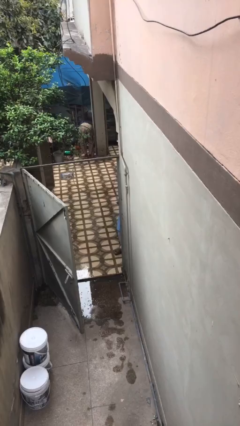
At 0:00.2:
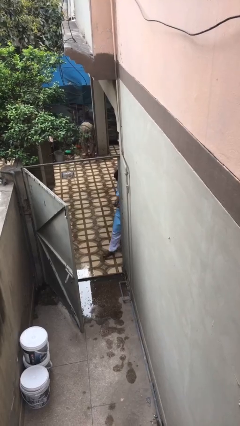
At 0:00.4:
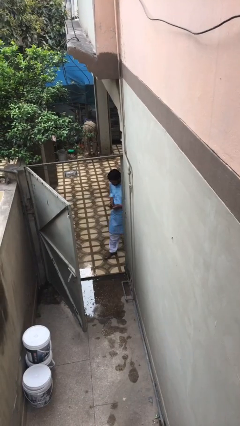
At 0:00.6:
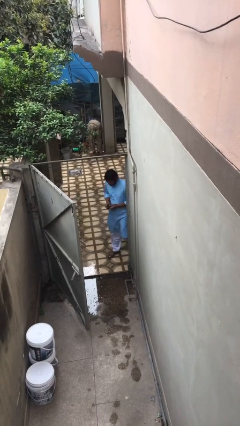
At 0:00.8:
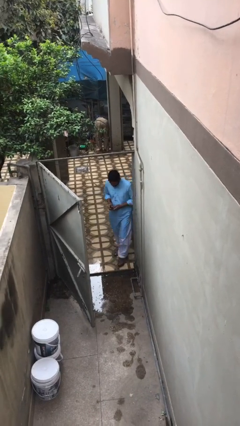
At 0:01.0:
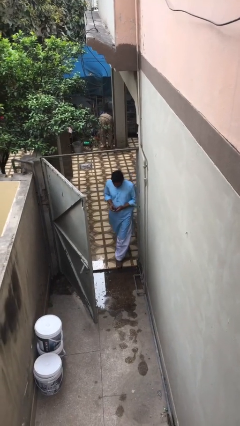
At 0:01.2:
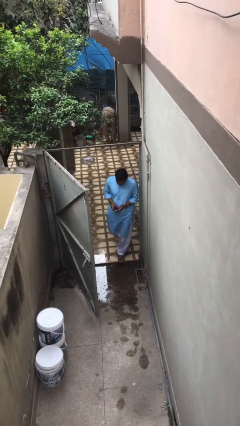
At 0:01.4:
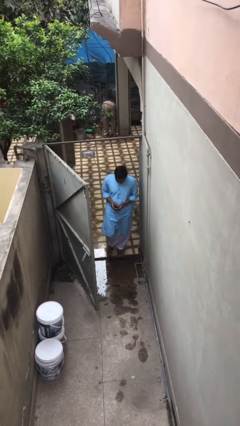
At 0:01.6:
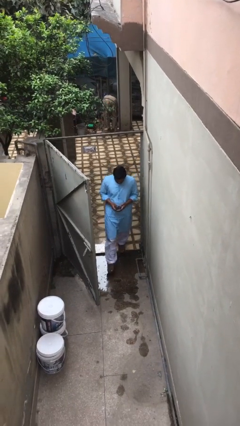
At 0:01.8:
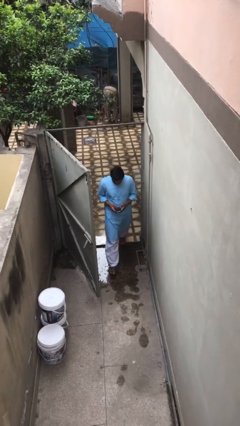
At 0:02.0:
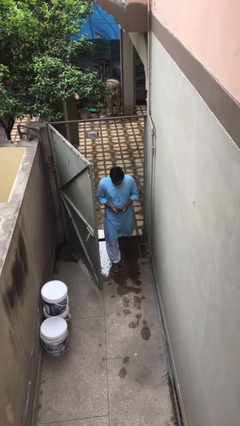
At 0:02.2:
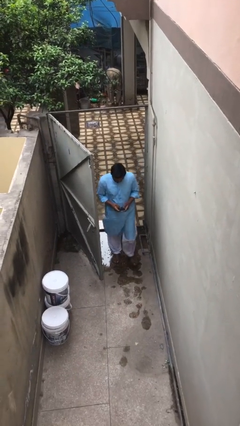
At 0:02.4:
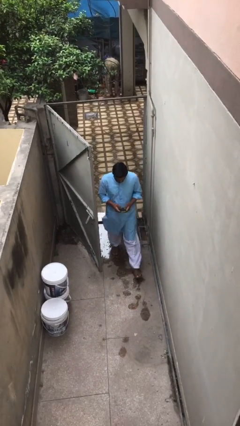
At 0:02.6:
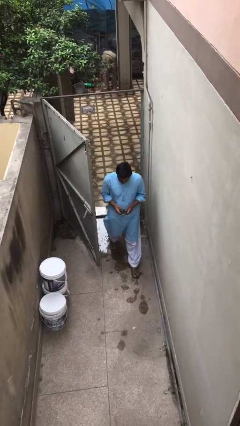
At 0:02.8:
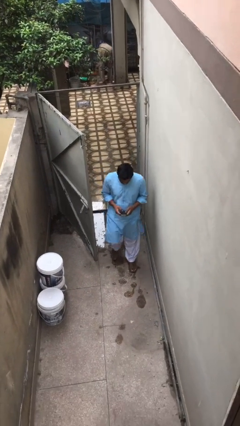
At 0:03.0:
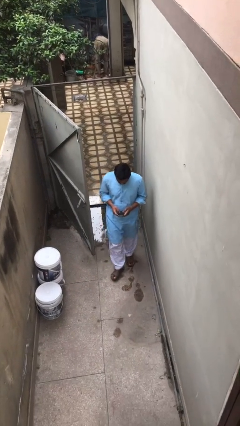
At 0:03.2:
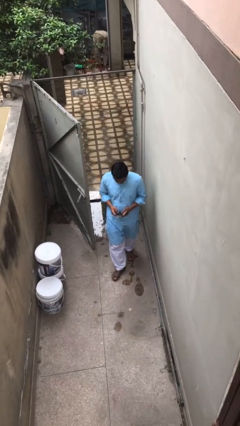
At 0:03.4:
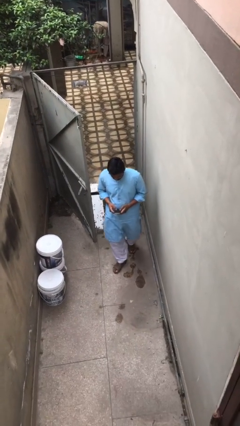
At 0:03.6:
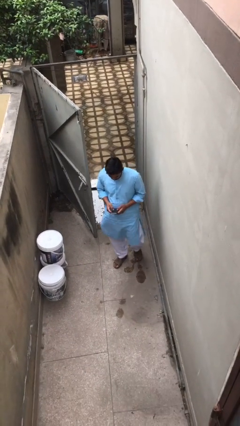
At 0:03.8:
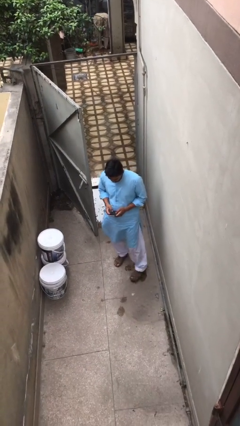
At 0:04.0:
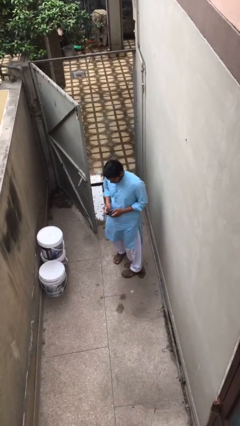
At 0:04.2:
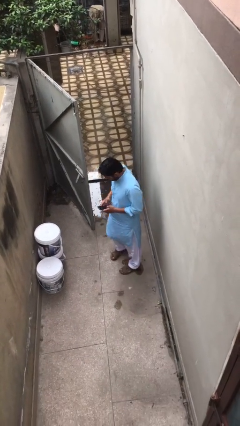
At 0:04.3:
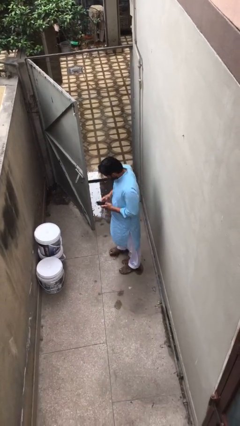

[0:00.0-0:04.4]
person enters scene through structure

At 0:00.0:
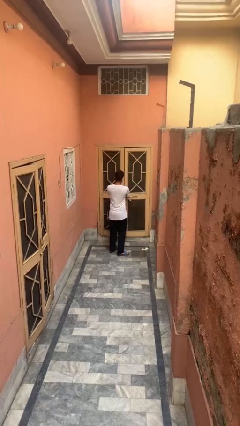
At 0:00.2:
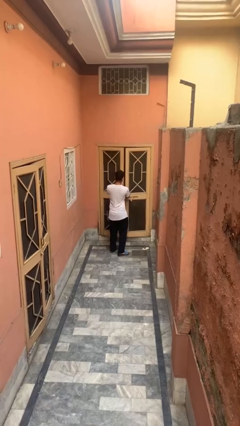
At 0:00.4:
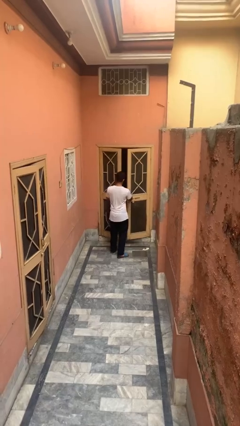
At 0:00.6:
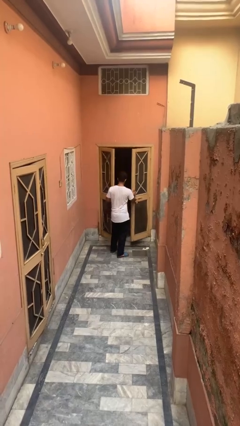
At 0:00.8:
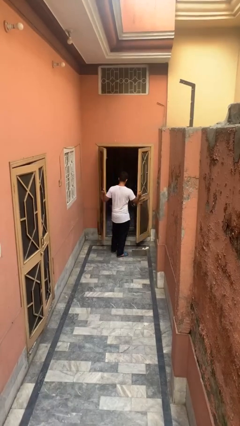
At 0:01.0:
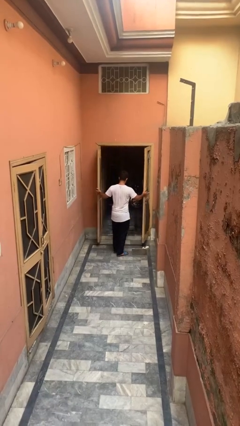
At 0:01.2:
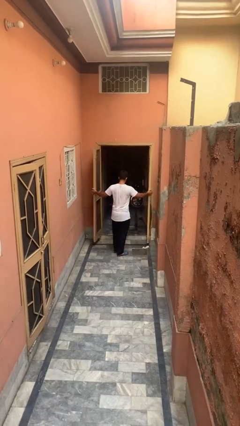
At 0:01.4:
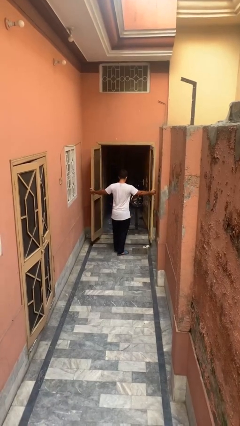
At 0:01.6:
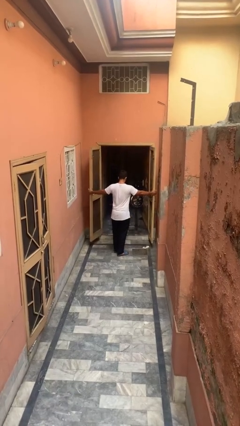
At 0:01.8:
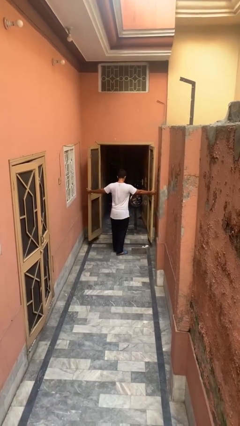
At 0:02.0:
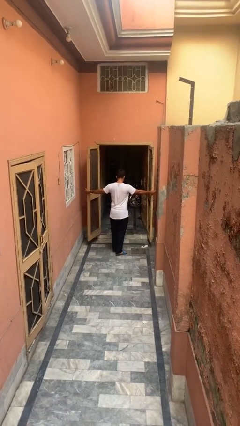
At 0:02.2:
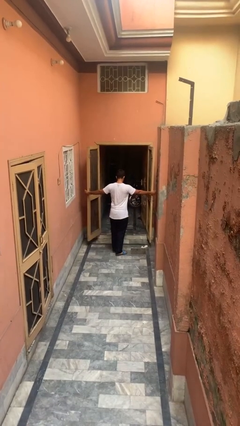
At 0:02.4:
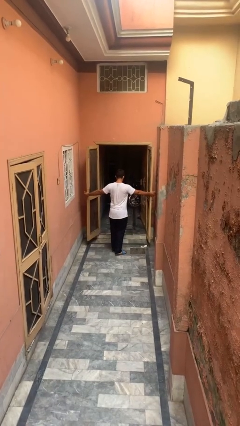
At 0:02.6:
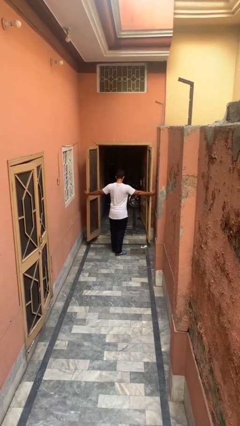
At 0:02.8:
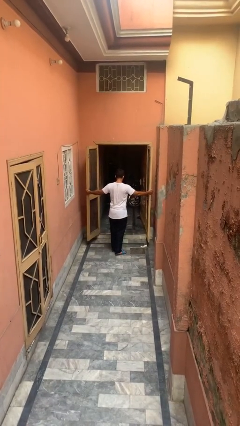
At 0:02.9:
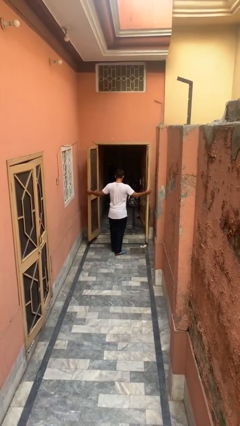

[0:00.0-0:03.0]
person opens gate

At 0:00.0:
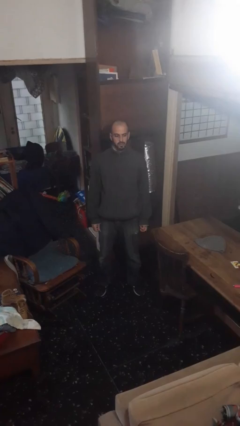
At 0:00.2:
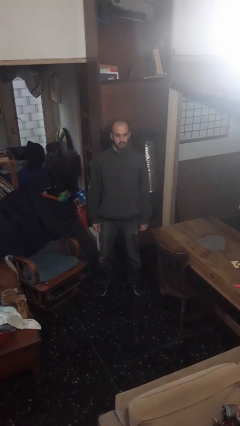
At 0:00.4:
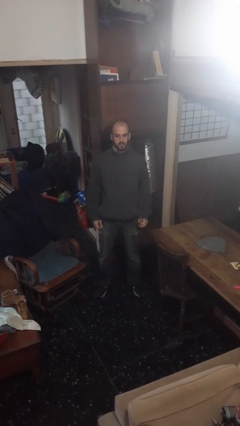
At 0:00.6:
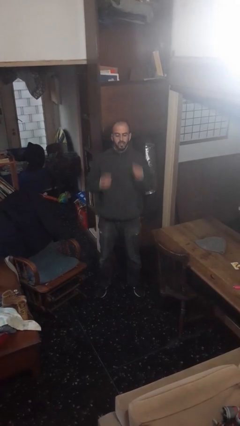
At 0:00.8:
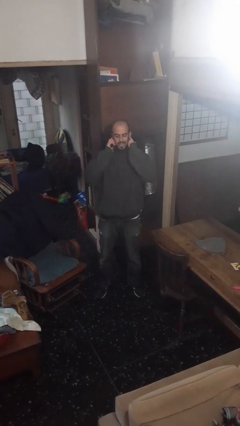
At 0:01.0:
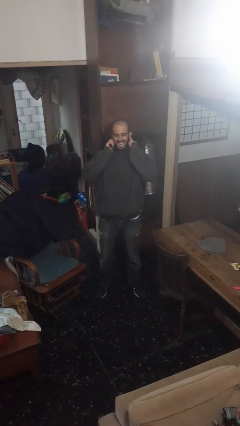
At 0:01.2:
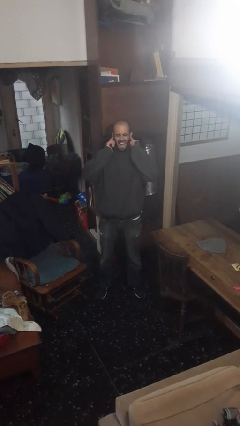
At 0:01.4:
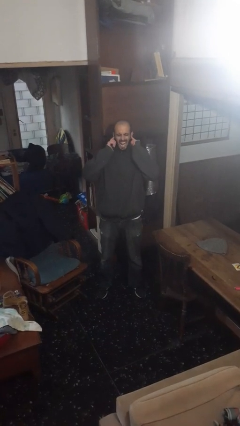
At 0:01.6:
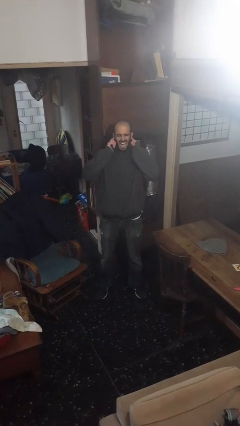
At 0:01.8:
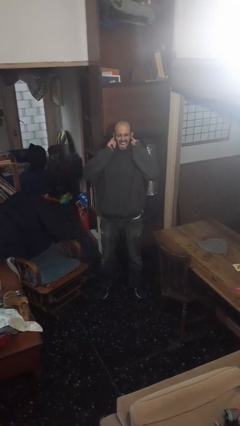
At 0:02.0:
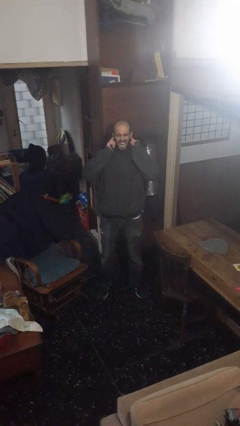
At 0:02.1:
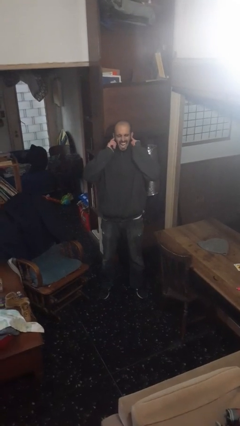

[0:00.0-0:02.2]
person puts fingers in ear

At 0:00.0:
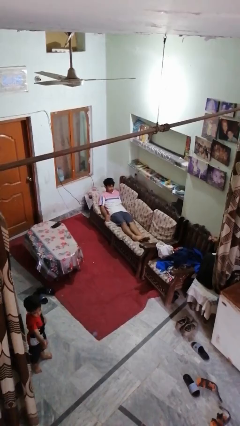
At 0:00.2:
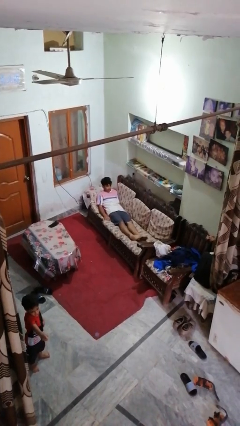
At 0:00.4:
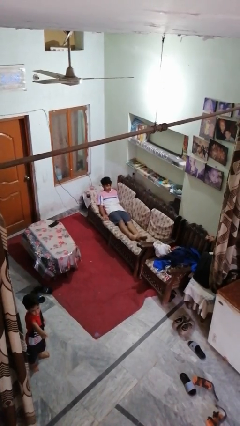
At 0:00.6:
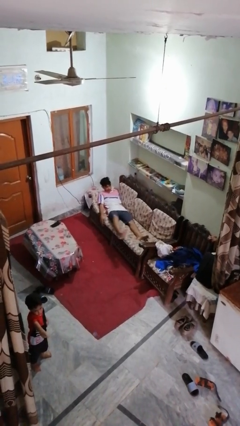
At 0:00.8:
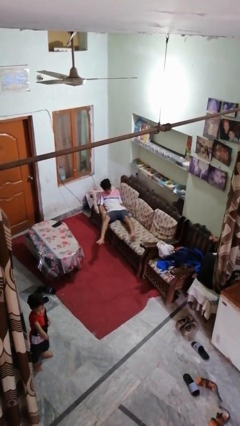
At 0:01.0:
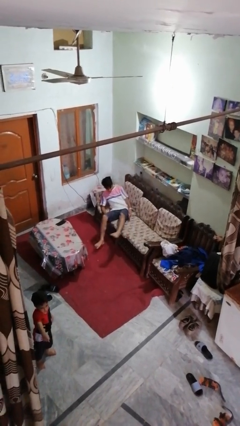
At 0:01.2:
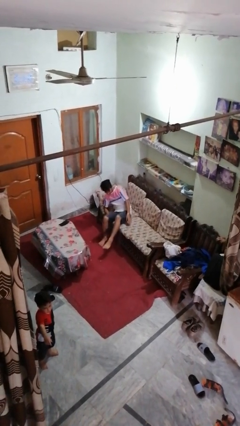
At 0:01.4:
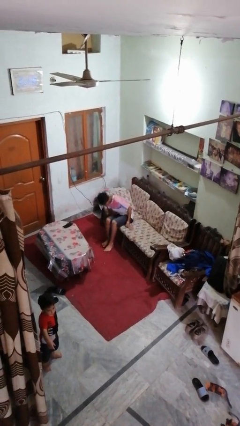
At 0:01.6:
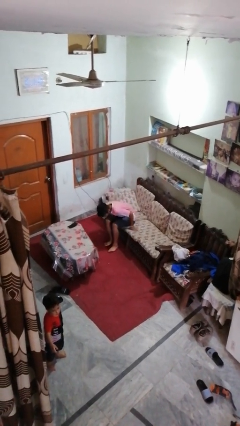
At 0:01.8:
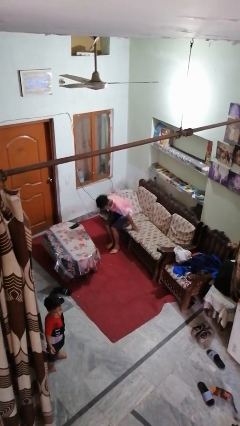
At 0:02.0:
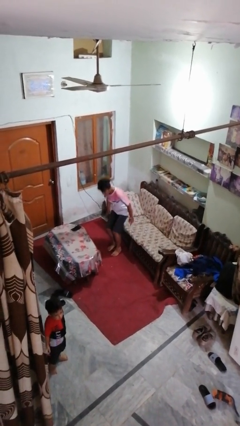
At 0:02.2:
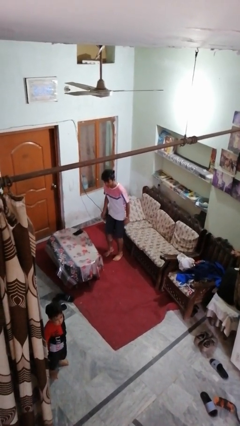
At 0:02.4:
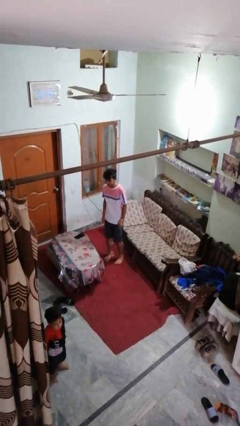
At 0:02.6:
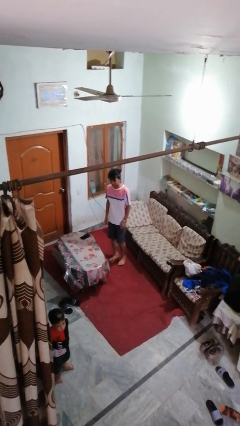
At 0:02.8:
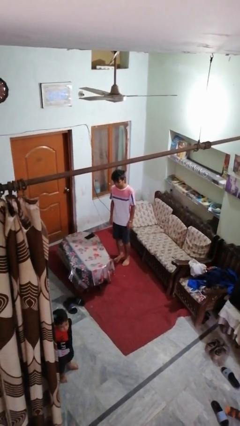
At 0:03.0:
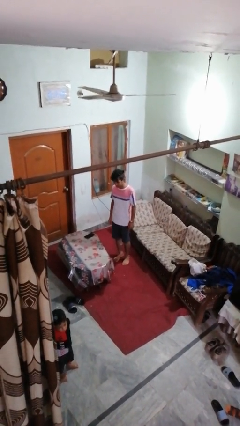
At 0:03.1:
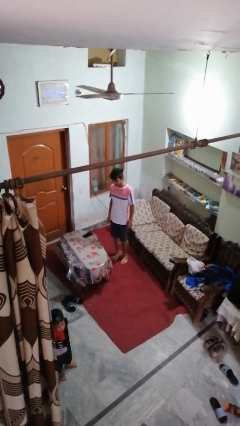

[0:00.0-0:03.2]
person stands up

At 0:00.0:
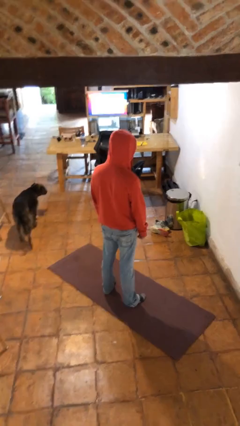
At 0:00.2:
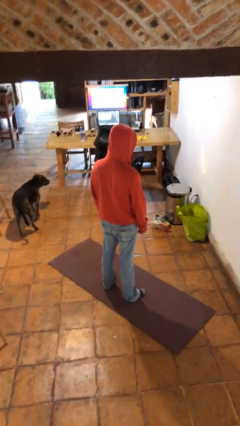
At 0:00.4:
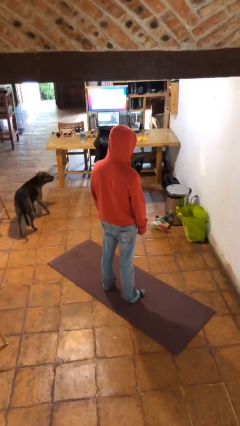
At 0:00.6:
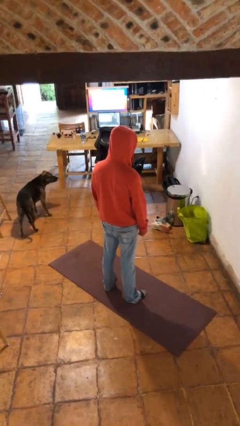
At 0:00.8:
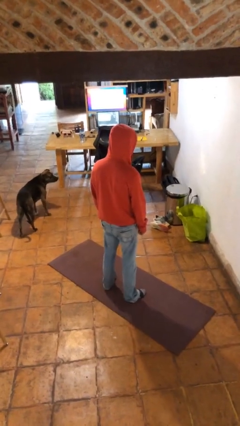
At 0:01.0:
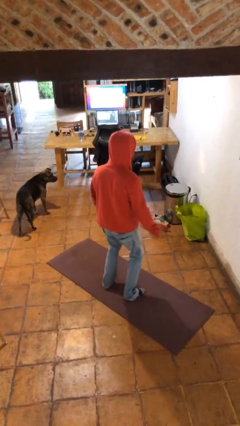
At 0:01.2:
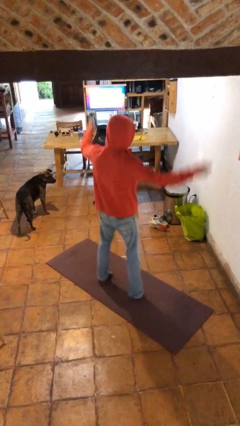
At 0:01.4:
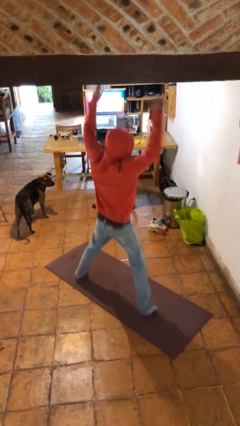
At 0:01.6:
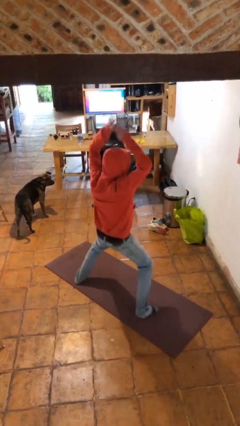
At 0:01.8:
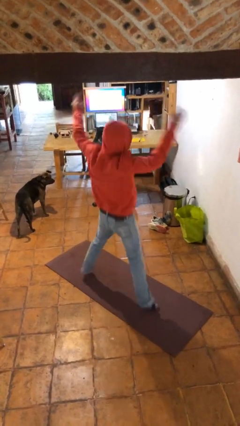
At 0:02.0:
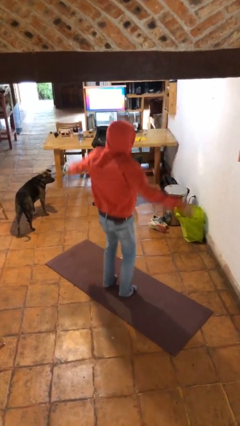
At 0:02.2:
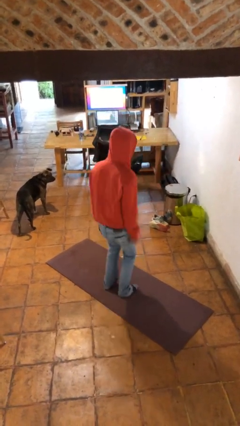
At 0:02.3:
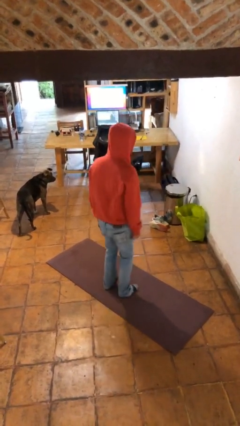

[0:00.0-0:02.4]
person exercises with jumping jacks

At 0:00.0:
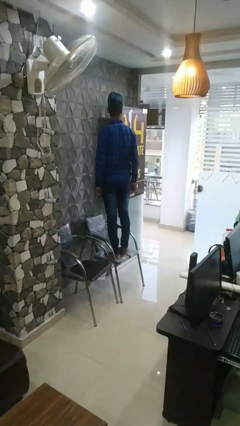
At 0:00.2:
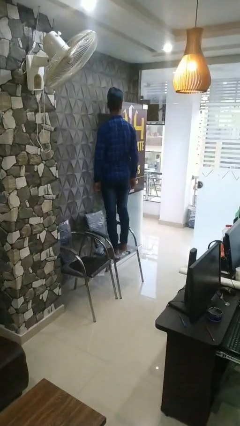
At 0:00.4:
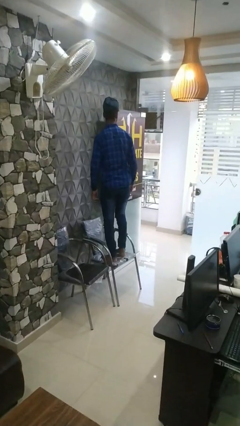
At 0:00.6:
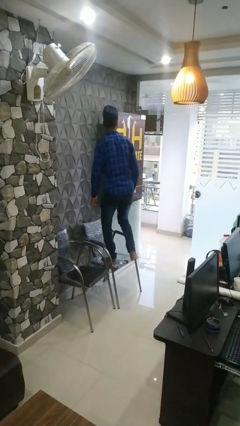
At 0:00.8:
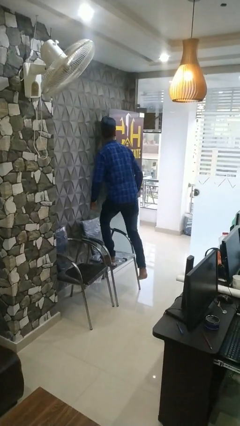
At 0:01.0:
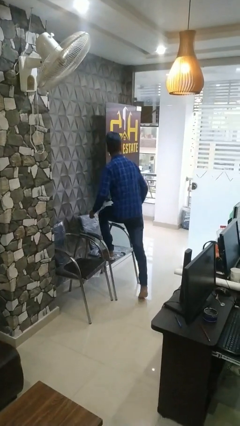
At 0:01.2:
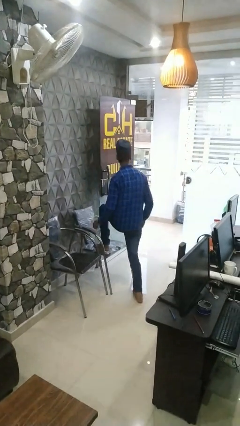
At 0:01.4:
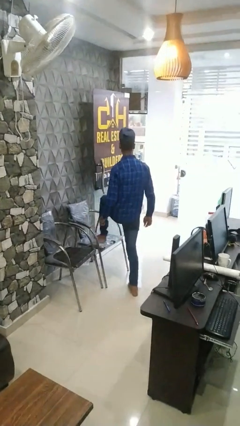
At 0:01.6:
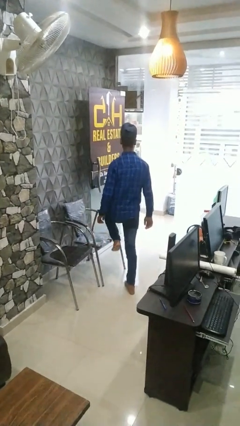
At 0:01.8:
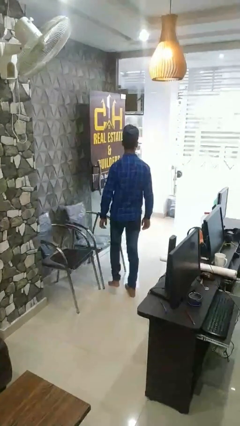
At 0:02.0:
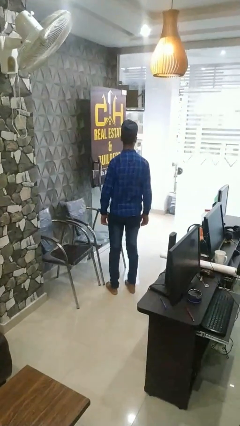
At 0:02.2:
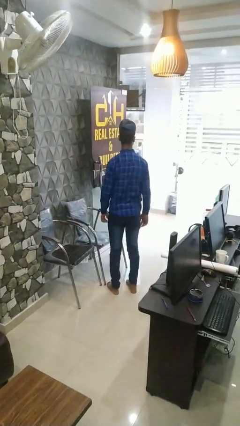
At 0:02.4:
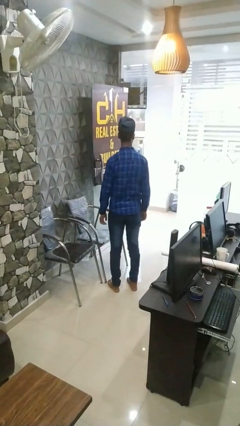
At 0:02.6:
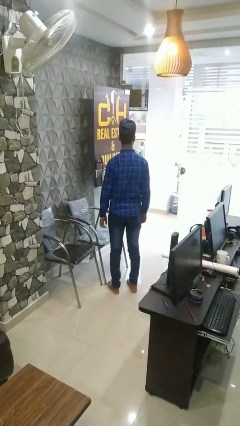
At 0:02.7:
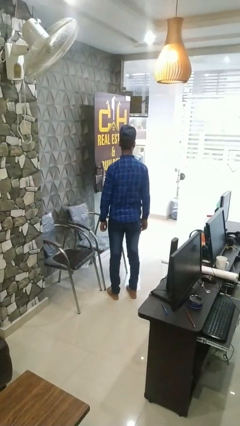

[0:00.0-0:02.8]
person climbs off chair
